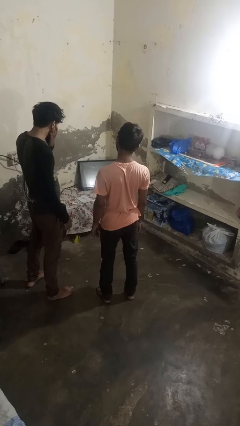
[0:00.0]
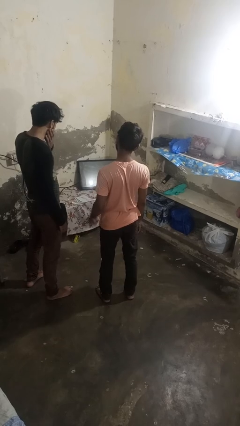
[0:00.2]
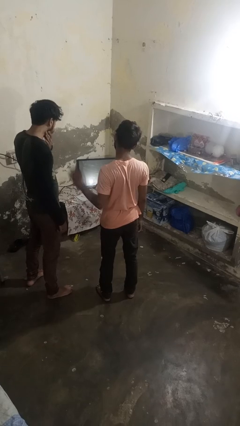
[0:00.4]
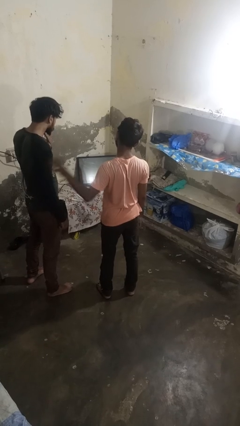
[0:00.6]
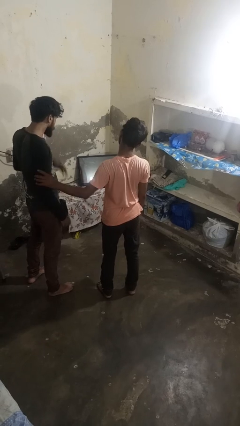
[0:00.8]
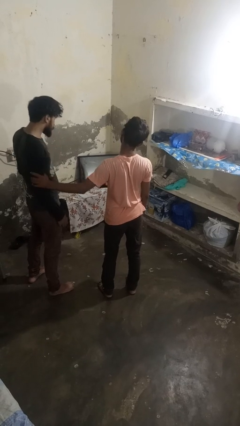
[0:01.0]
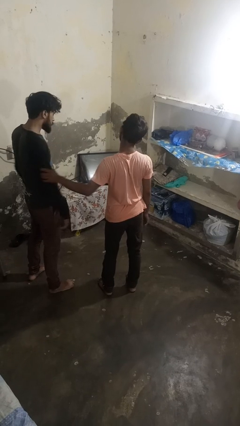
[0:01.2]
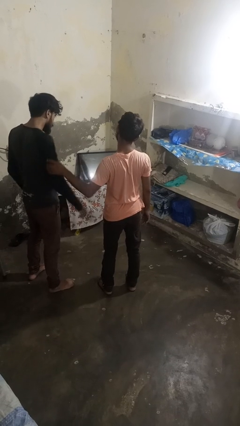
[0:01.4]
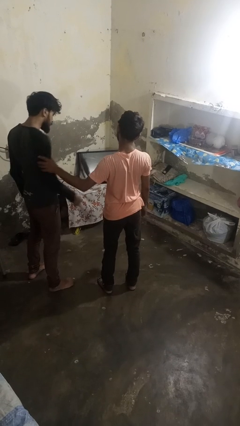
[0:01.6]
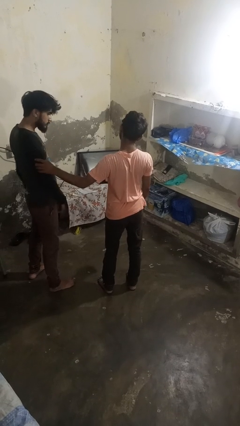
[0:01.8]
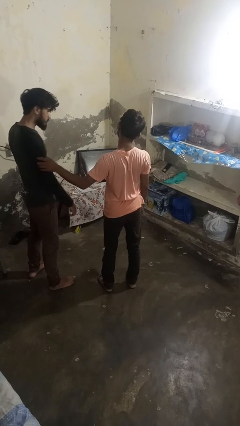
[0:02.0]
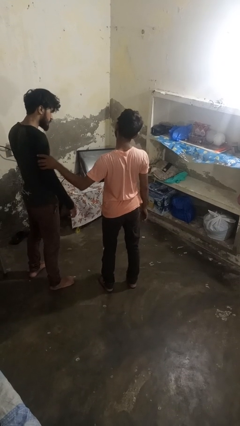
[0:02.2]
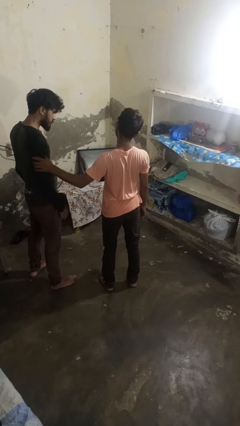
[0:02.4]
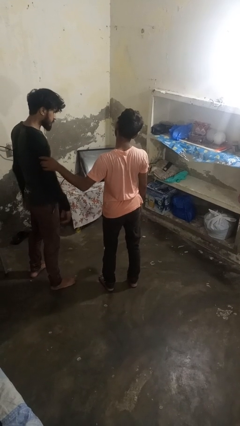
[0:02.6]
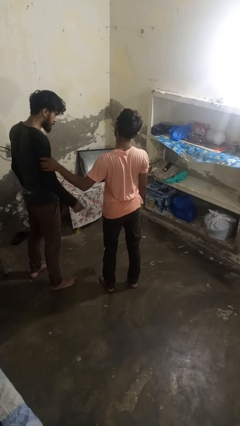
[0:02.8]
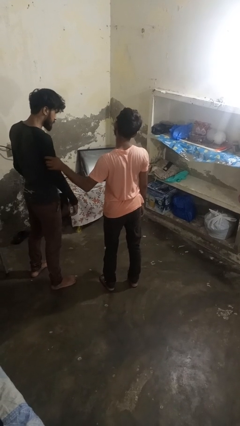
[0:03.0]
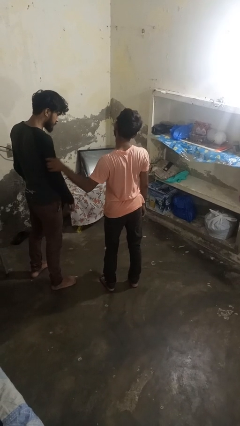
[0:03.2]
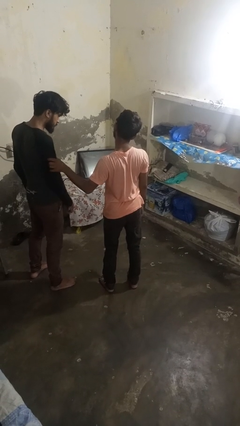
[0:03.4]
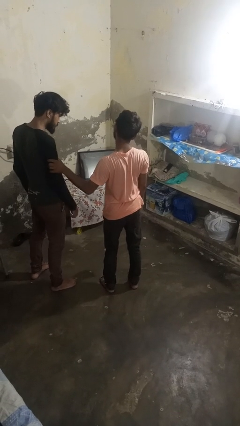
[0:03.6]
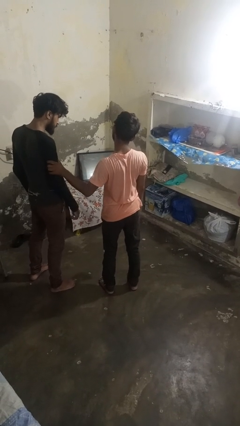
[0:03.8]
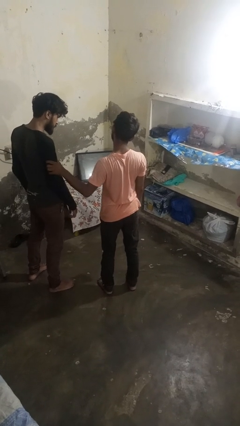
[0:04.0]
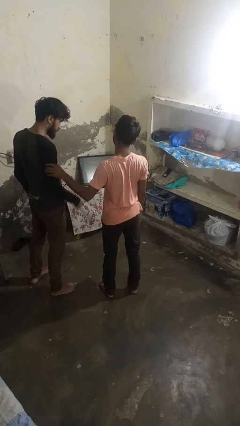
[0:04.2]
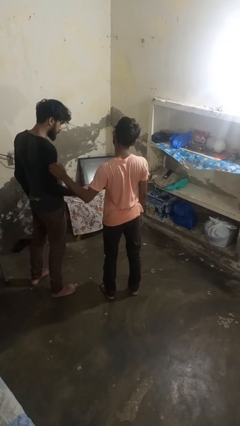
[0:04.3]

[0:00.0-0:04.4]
person grabs person by bicep

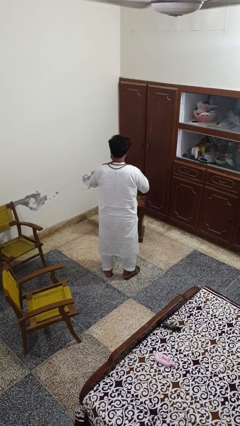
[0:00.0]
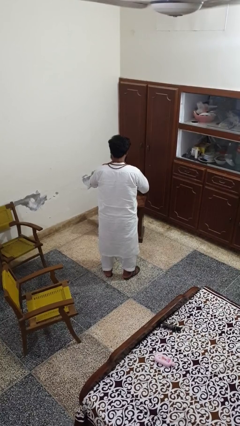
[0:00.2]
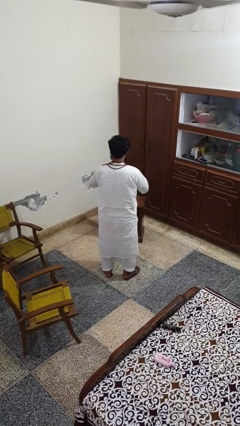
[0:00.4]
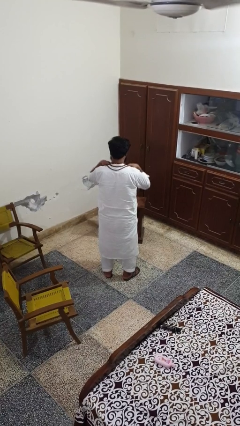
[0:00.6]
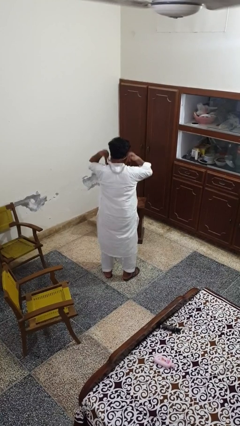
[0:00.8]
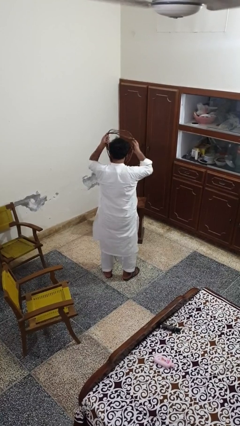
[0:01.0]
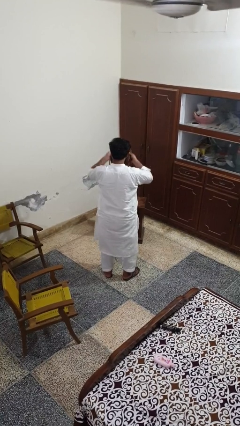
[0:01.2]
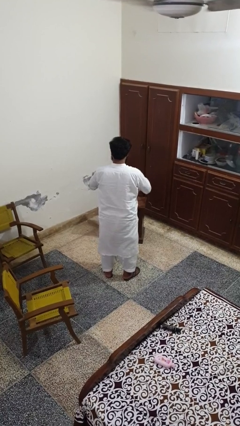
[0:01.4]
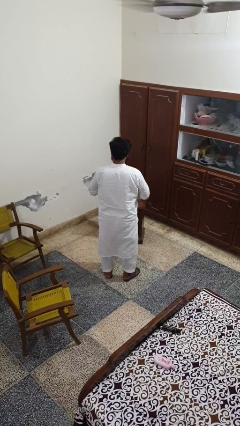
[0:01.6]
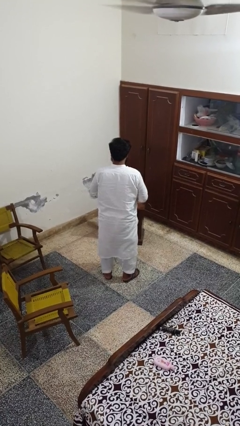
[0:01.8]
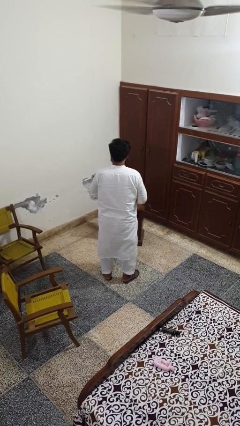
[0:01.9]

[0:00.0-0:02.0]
person takes off necklace

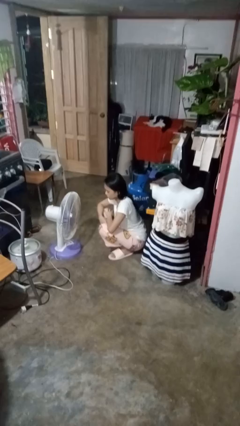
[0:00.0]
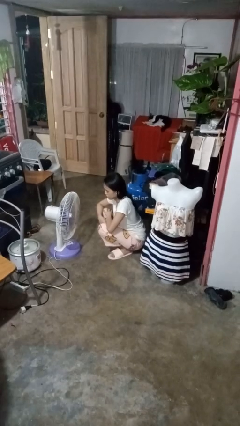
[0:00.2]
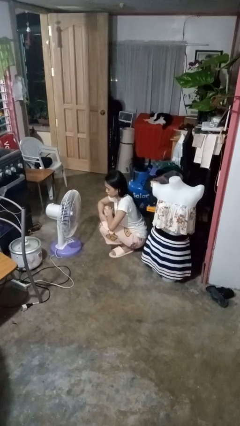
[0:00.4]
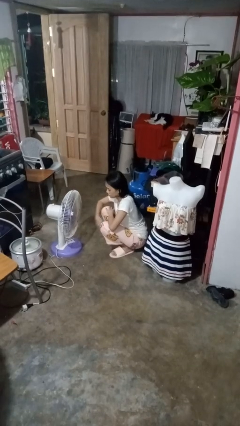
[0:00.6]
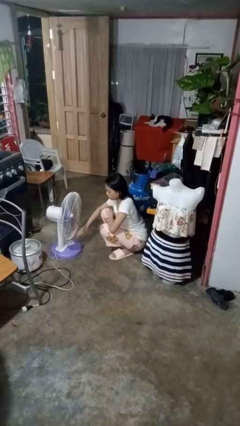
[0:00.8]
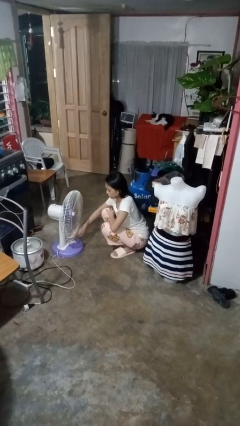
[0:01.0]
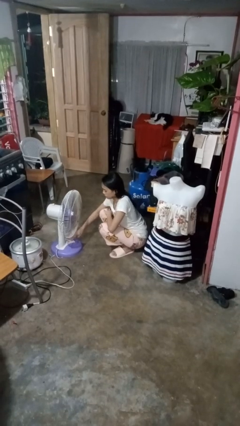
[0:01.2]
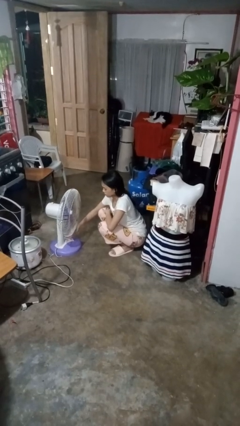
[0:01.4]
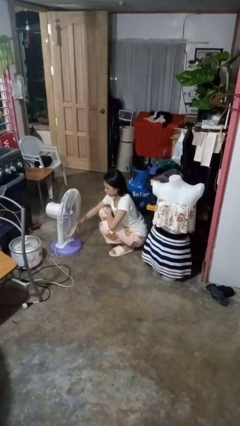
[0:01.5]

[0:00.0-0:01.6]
person turns on fan

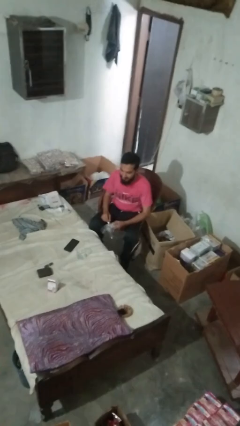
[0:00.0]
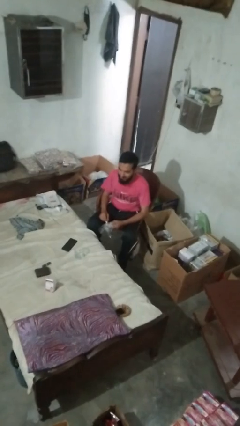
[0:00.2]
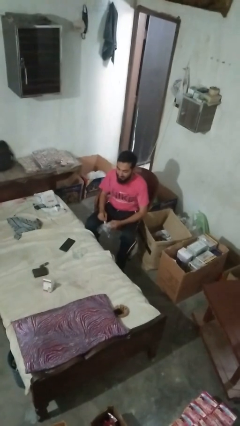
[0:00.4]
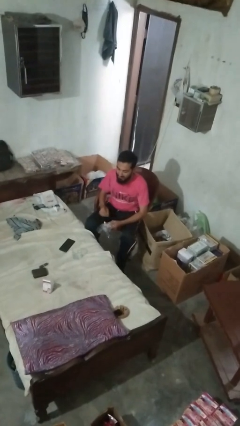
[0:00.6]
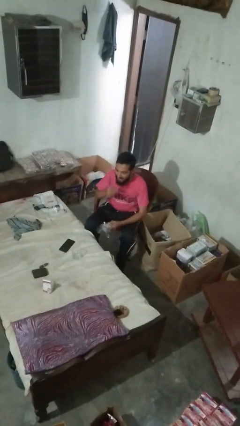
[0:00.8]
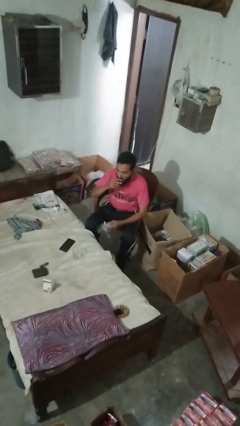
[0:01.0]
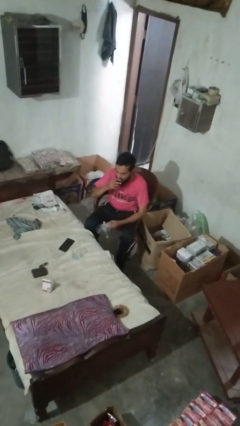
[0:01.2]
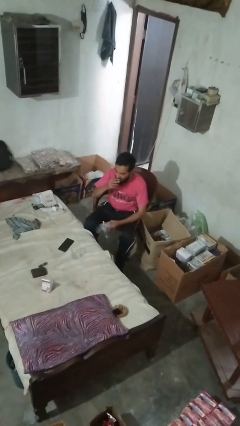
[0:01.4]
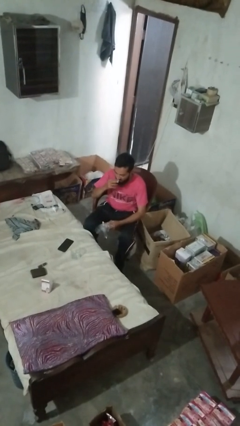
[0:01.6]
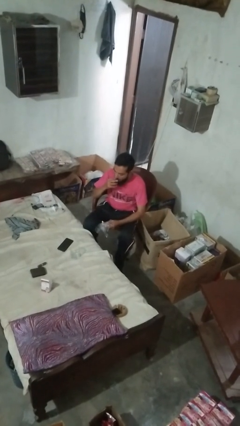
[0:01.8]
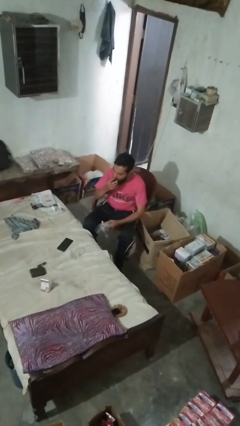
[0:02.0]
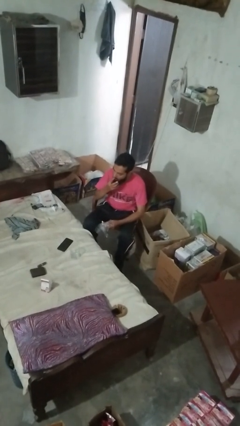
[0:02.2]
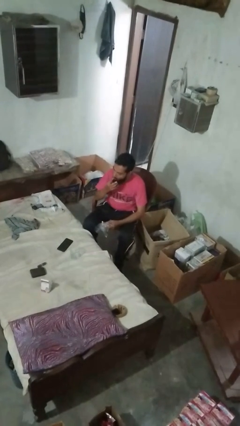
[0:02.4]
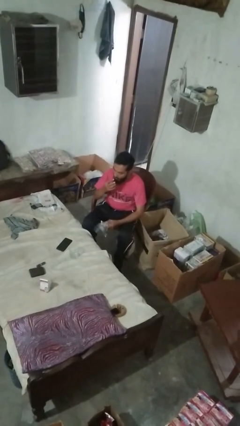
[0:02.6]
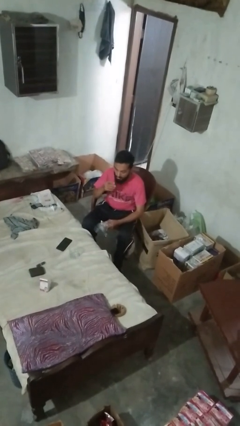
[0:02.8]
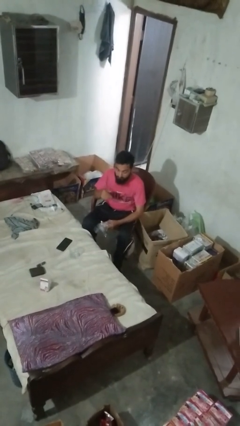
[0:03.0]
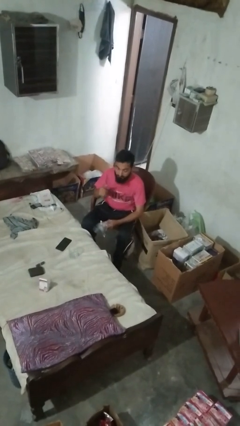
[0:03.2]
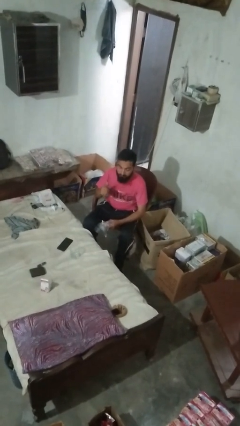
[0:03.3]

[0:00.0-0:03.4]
person licks fingers

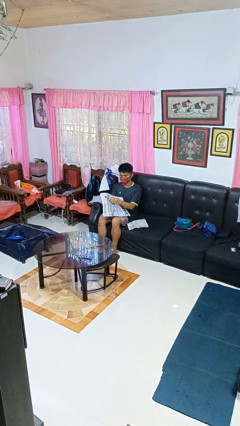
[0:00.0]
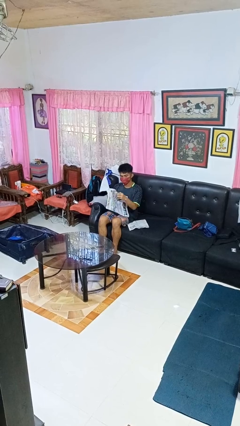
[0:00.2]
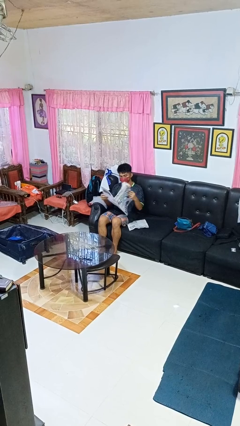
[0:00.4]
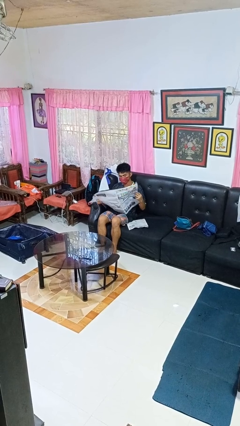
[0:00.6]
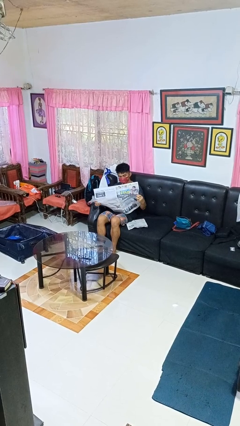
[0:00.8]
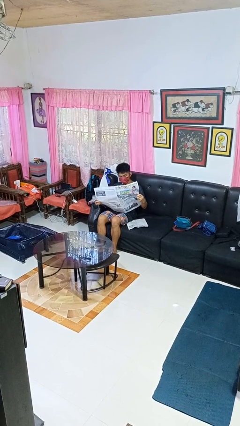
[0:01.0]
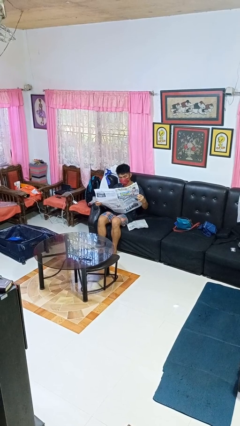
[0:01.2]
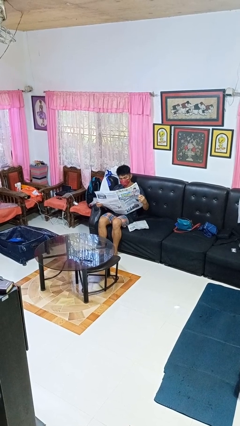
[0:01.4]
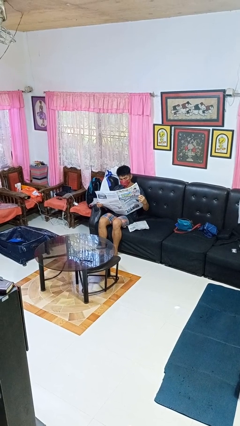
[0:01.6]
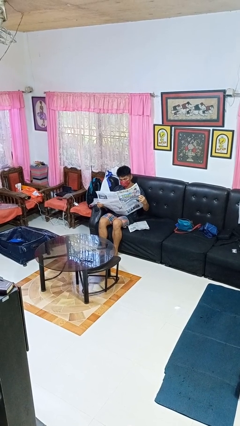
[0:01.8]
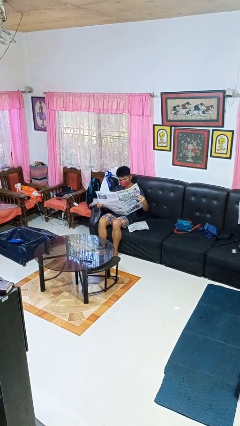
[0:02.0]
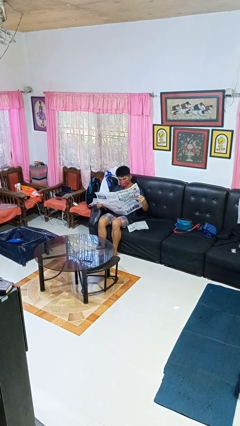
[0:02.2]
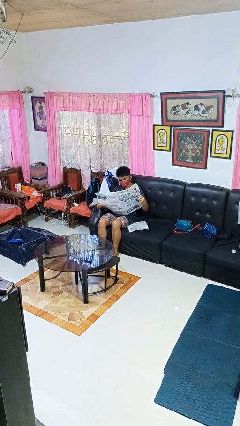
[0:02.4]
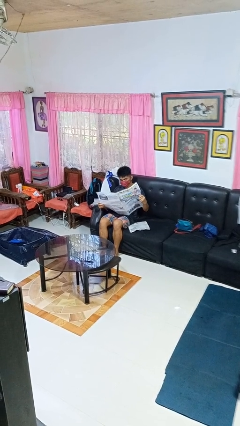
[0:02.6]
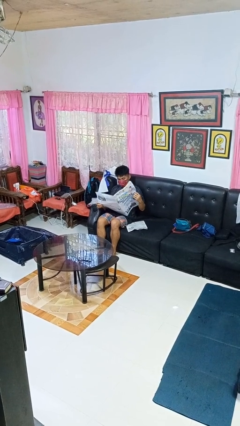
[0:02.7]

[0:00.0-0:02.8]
person reads newspaper

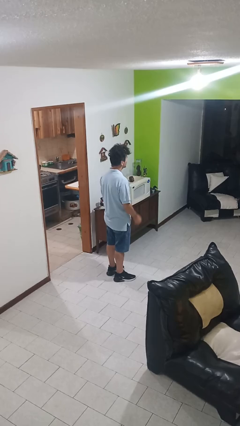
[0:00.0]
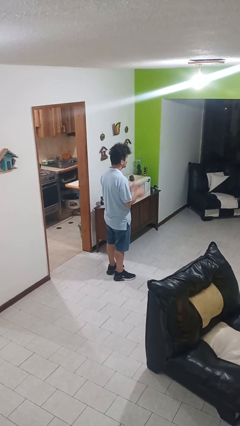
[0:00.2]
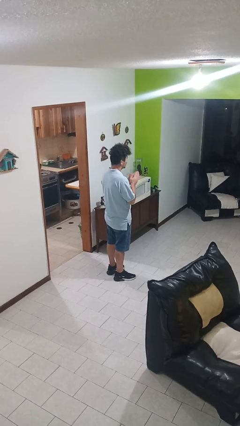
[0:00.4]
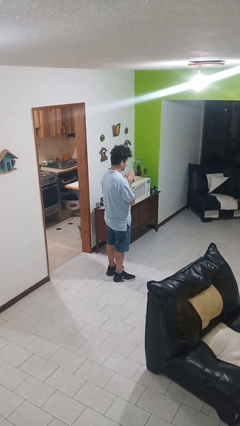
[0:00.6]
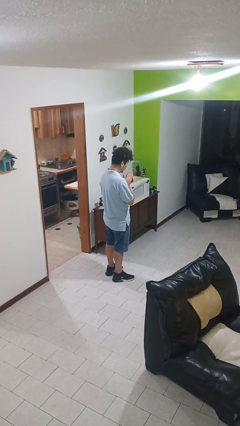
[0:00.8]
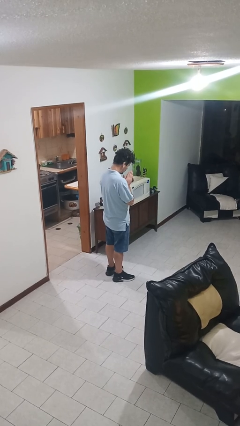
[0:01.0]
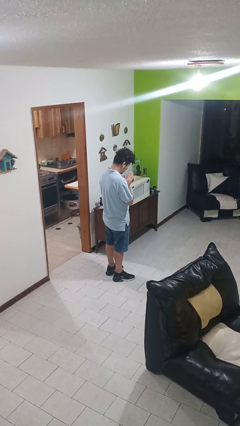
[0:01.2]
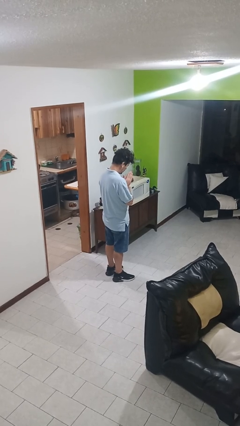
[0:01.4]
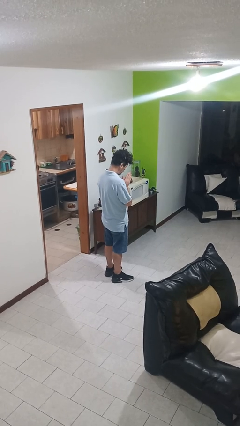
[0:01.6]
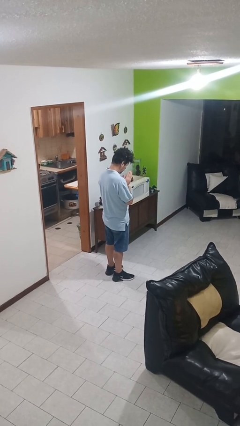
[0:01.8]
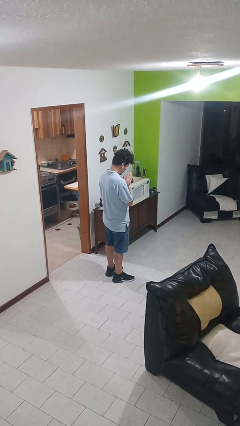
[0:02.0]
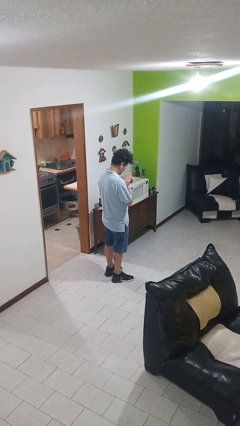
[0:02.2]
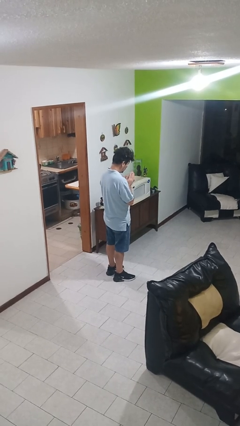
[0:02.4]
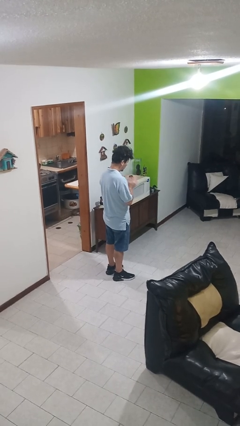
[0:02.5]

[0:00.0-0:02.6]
person prays

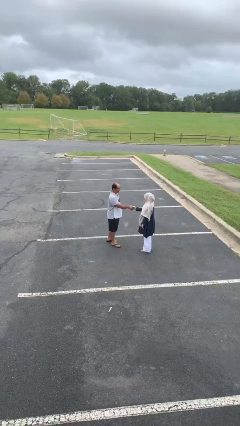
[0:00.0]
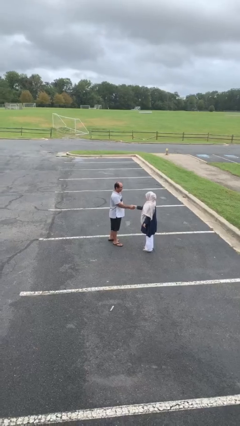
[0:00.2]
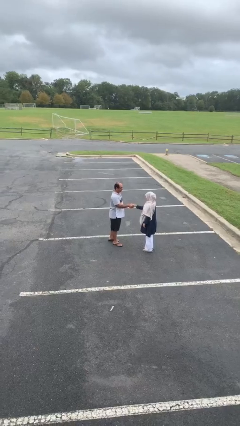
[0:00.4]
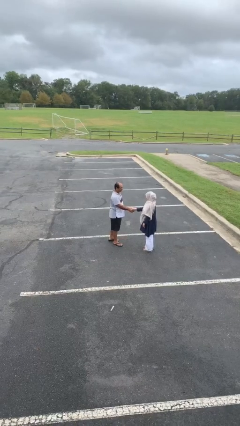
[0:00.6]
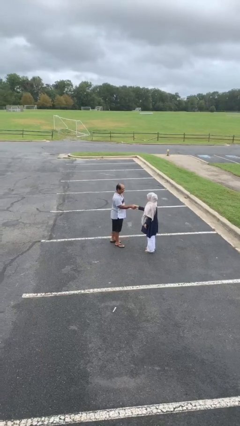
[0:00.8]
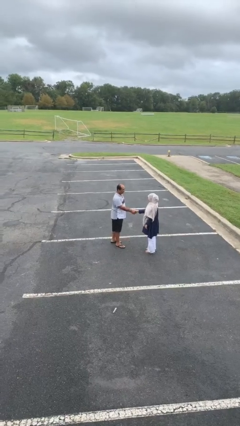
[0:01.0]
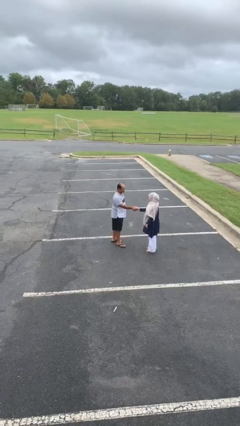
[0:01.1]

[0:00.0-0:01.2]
person shakes hand
